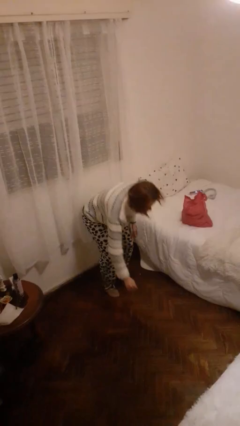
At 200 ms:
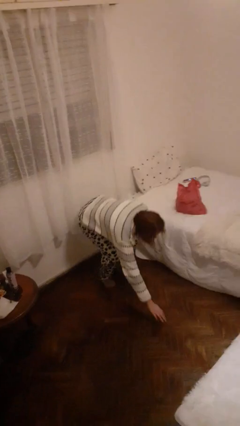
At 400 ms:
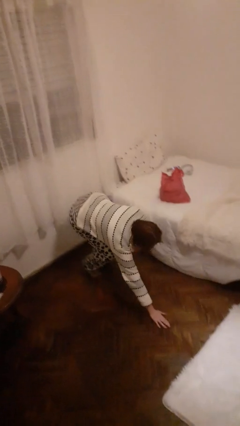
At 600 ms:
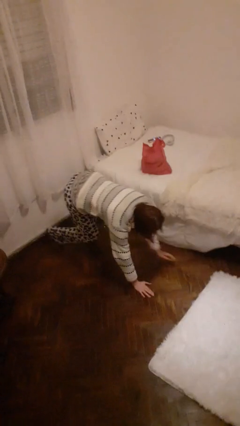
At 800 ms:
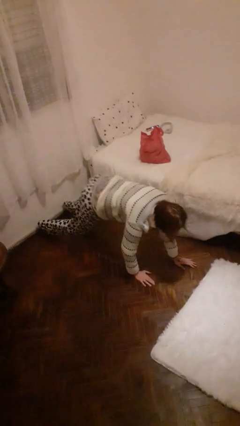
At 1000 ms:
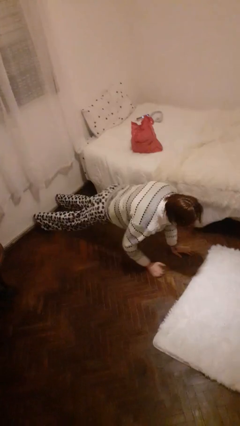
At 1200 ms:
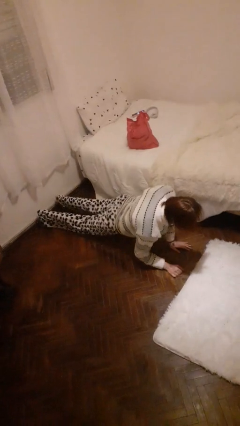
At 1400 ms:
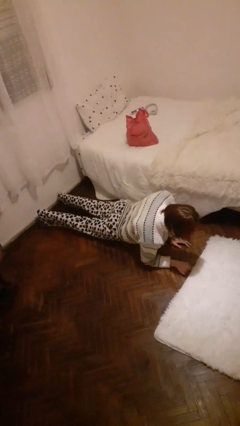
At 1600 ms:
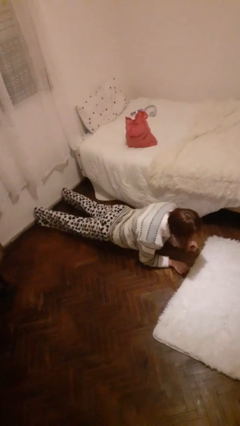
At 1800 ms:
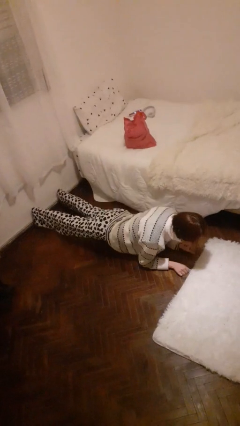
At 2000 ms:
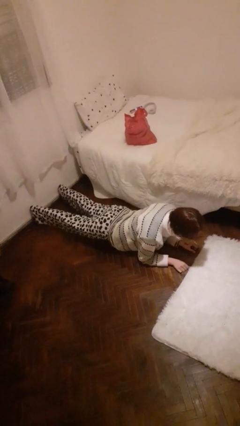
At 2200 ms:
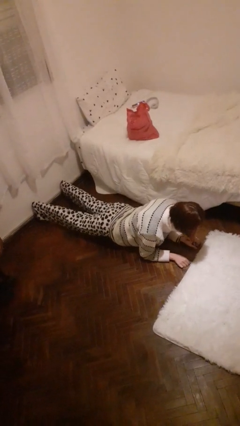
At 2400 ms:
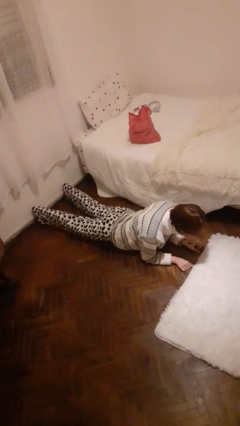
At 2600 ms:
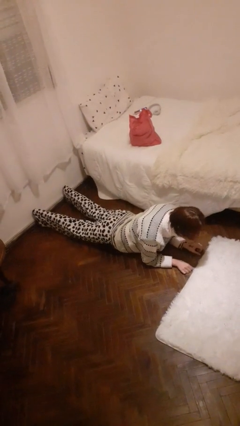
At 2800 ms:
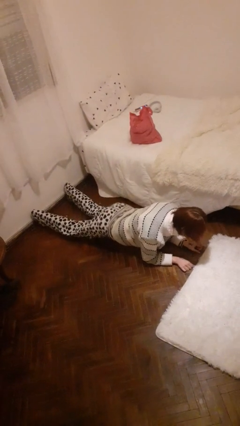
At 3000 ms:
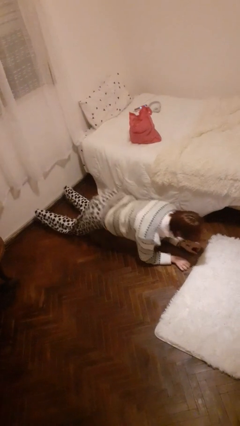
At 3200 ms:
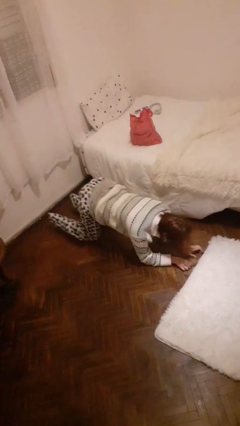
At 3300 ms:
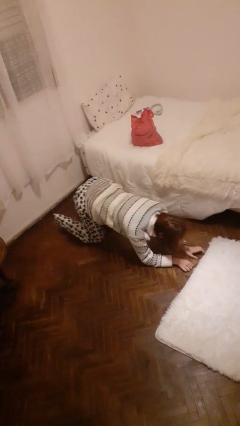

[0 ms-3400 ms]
person exercises with plank

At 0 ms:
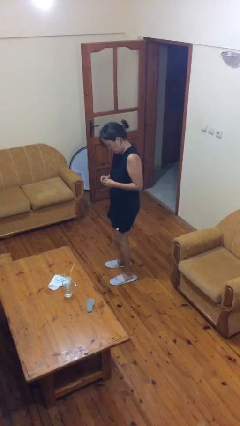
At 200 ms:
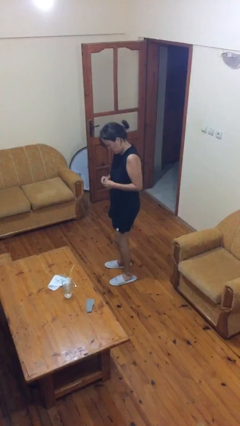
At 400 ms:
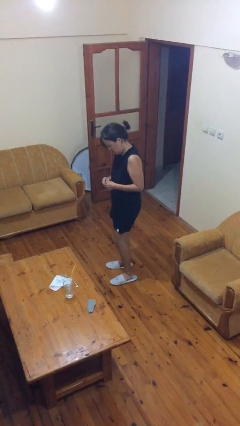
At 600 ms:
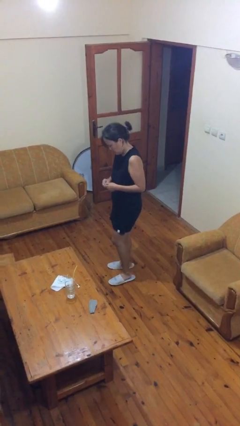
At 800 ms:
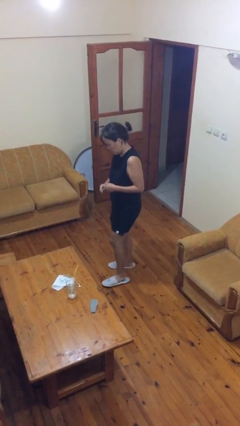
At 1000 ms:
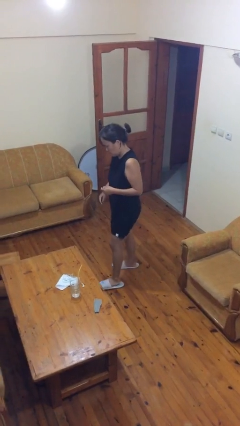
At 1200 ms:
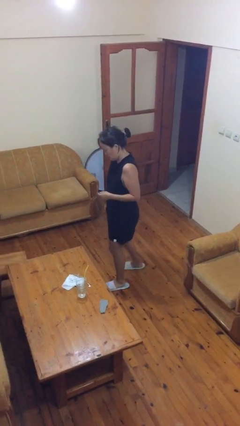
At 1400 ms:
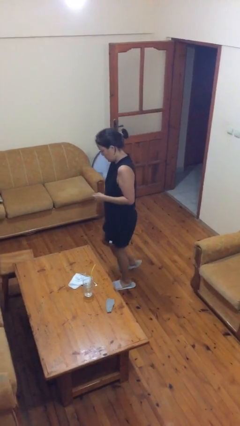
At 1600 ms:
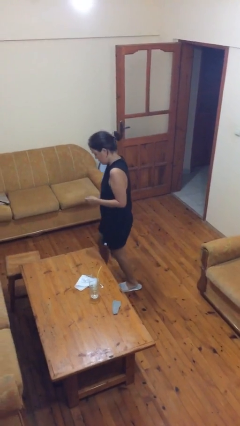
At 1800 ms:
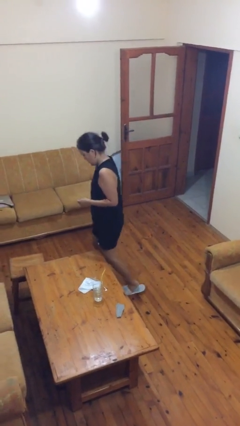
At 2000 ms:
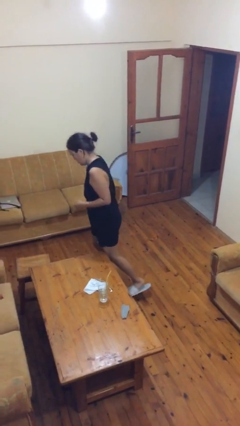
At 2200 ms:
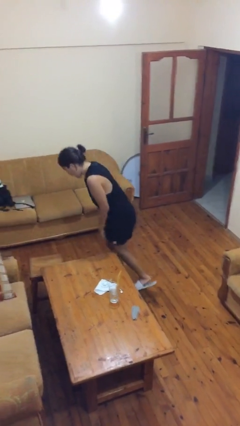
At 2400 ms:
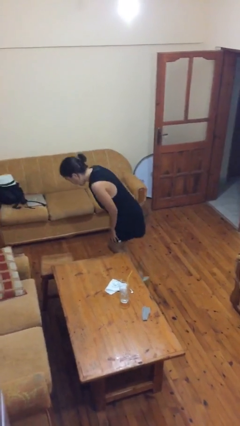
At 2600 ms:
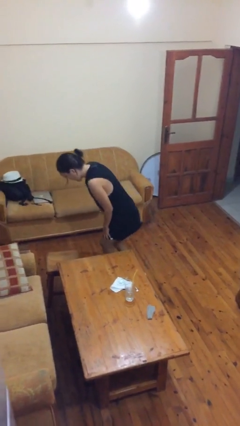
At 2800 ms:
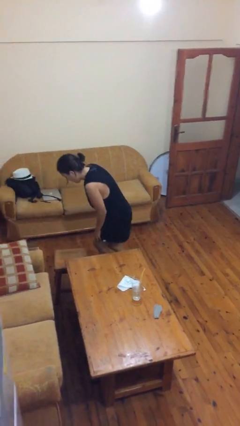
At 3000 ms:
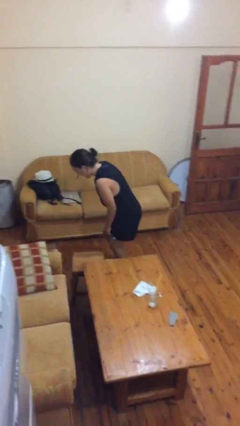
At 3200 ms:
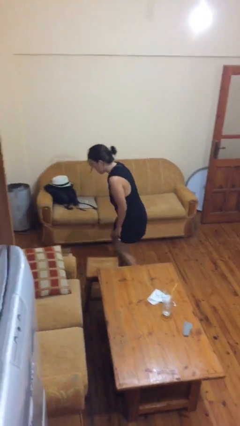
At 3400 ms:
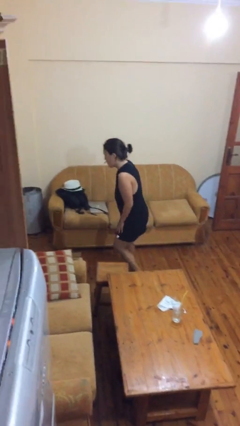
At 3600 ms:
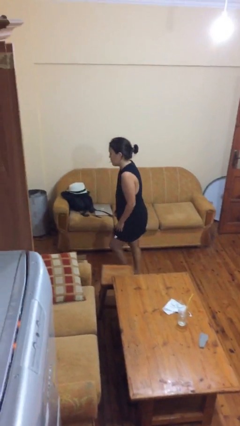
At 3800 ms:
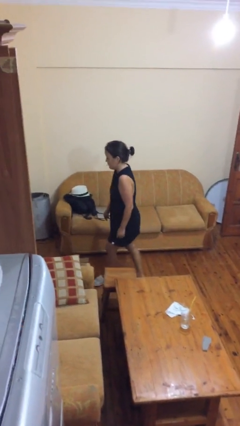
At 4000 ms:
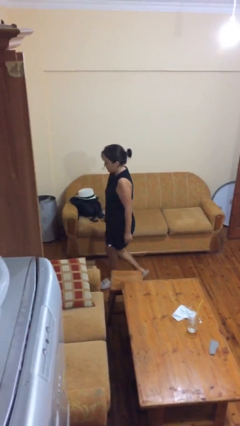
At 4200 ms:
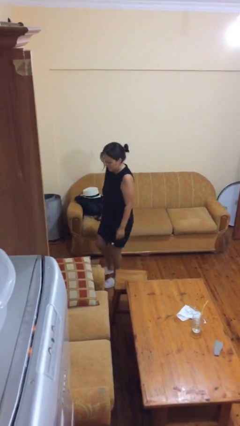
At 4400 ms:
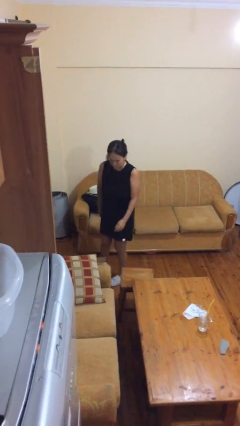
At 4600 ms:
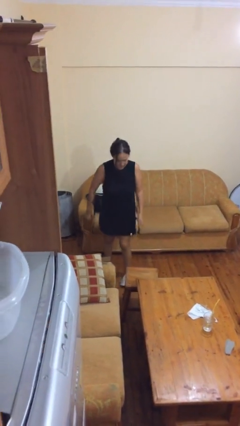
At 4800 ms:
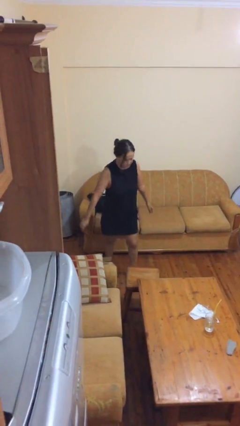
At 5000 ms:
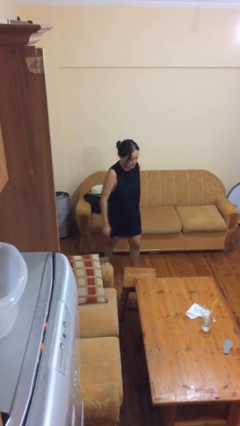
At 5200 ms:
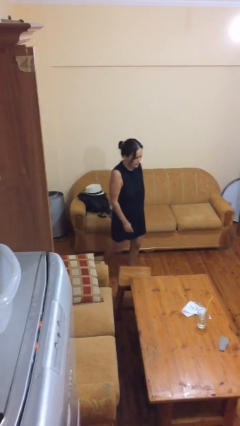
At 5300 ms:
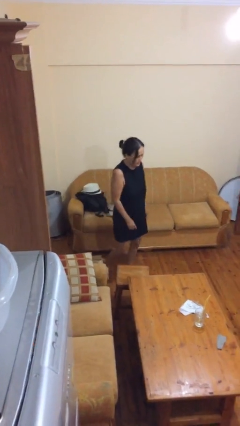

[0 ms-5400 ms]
person bumps into table

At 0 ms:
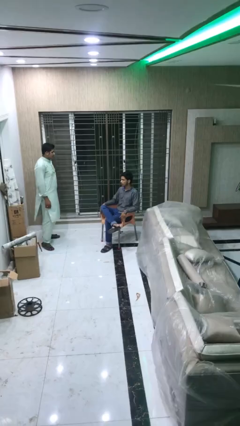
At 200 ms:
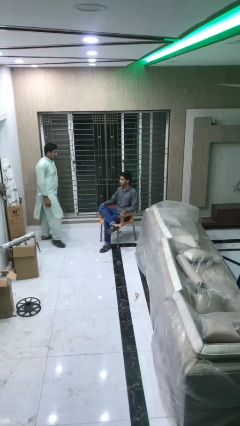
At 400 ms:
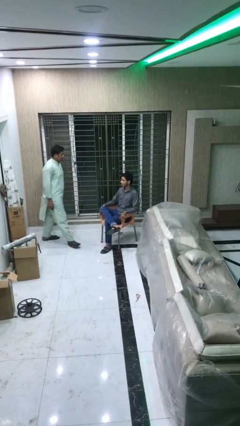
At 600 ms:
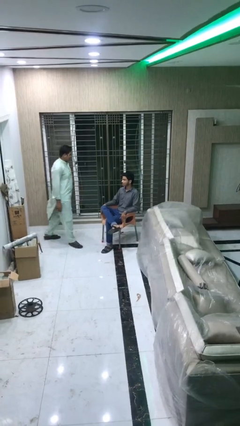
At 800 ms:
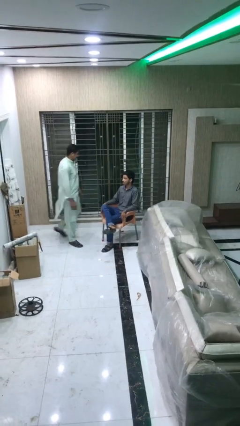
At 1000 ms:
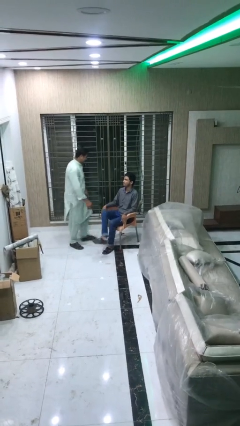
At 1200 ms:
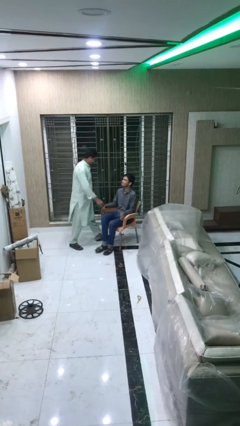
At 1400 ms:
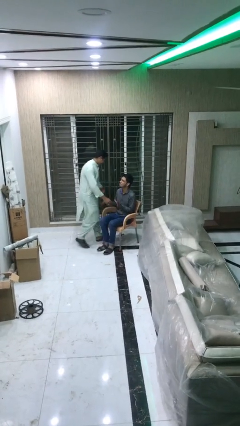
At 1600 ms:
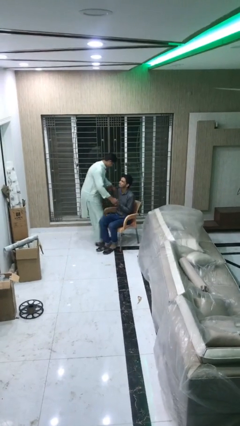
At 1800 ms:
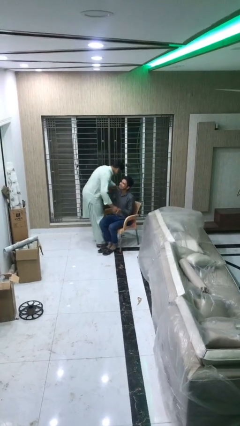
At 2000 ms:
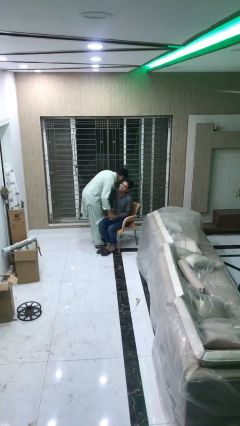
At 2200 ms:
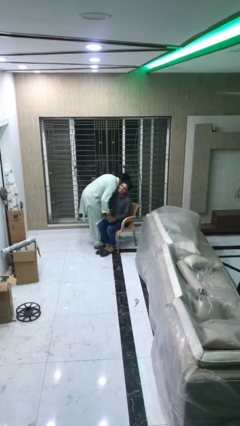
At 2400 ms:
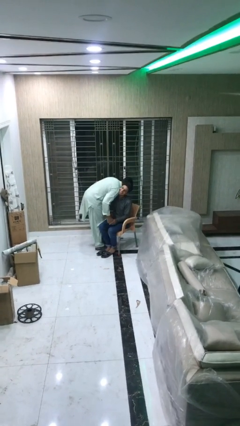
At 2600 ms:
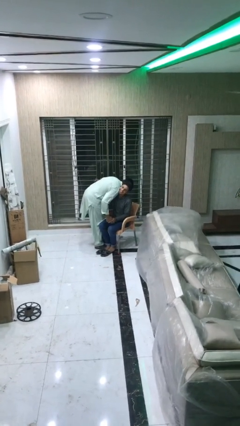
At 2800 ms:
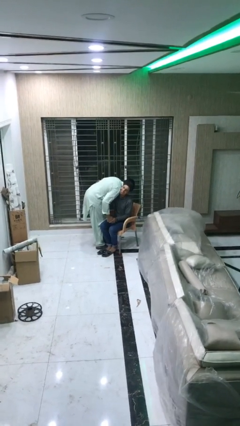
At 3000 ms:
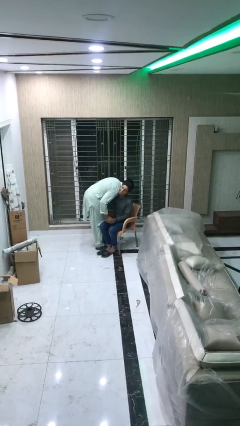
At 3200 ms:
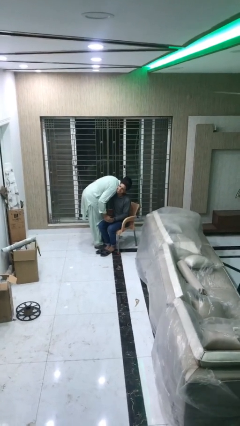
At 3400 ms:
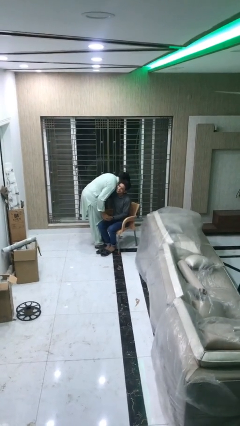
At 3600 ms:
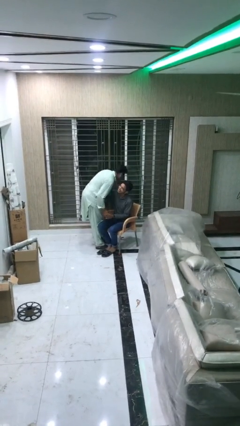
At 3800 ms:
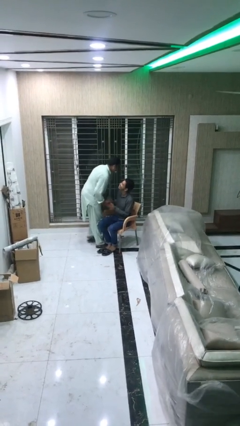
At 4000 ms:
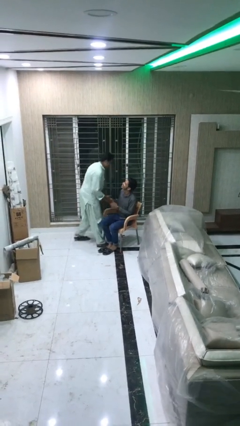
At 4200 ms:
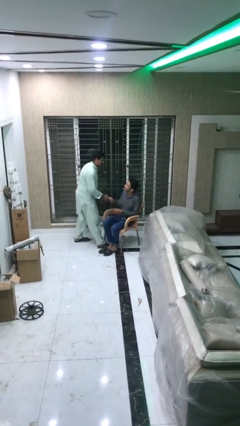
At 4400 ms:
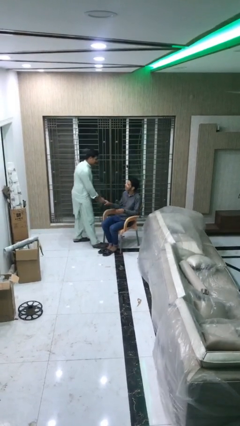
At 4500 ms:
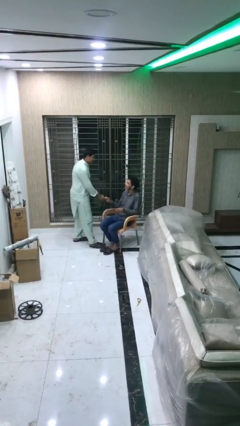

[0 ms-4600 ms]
person embraces person

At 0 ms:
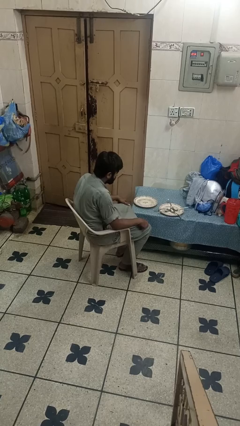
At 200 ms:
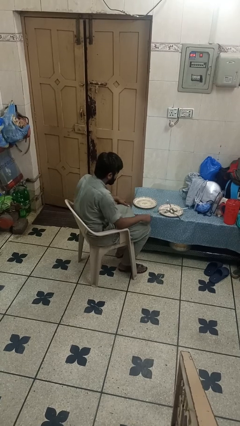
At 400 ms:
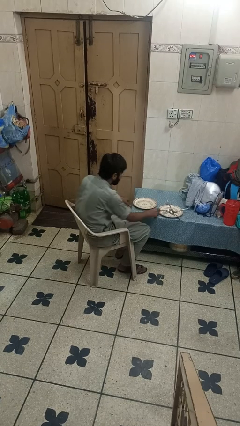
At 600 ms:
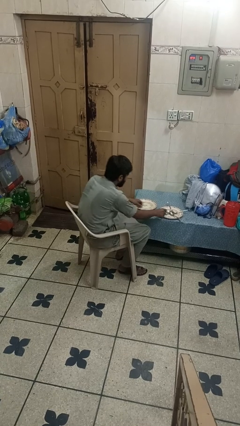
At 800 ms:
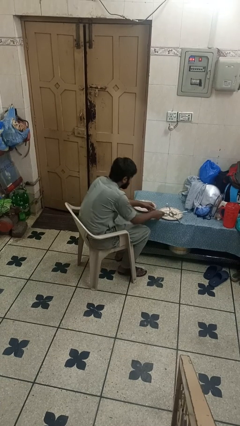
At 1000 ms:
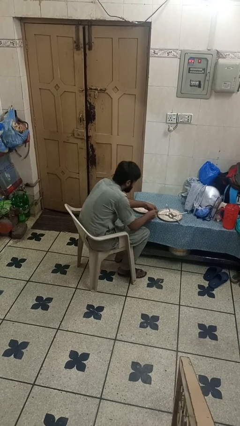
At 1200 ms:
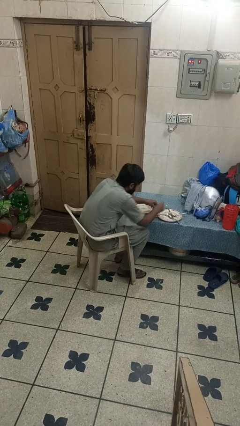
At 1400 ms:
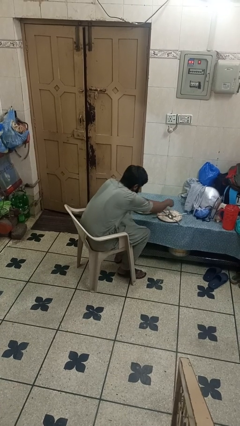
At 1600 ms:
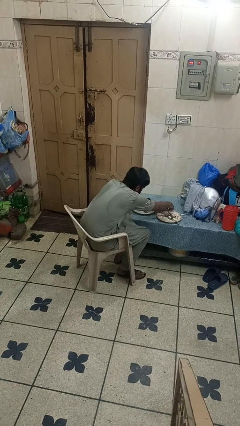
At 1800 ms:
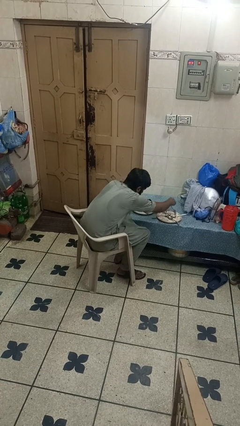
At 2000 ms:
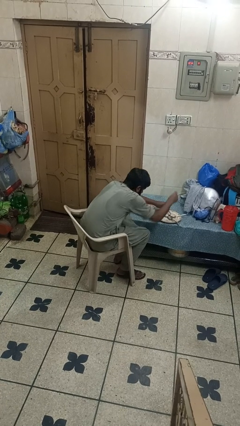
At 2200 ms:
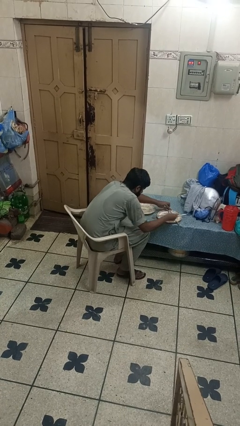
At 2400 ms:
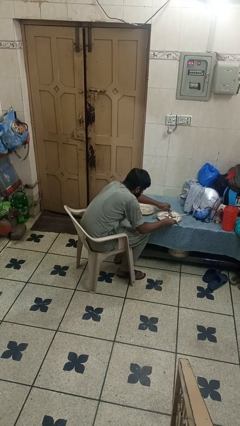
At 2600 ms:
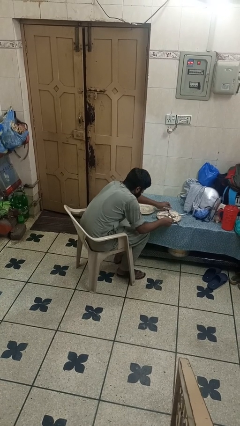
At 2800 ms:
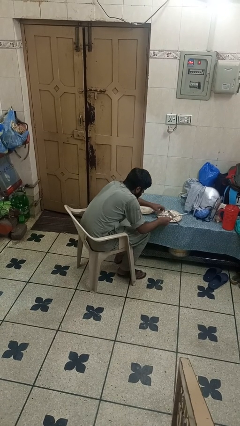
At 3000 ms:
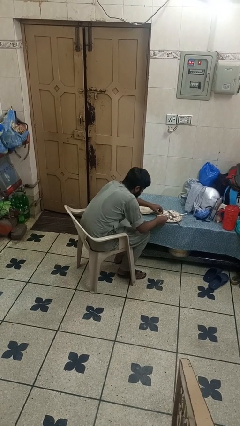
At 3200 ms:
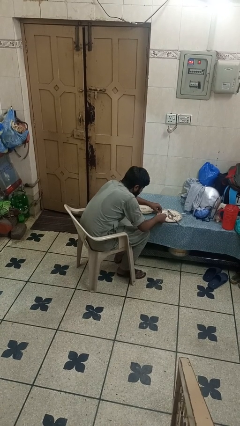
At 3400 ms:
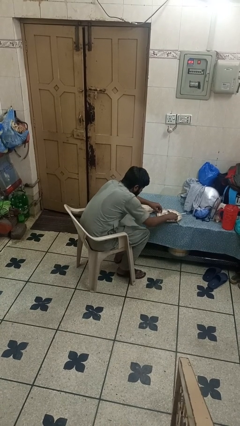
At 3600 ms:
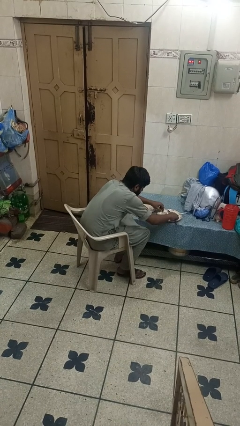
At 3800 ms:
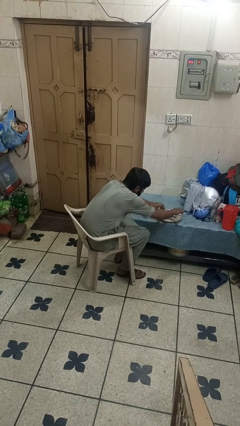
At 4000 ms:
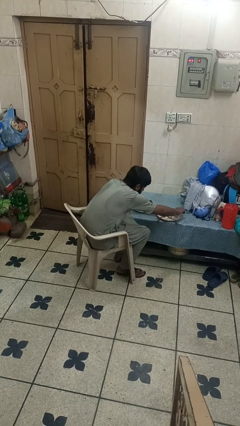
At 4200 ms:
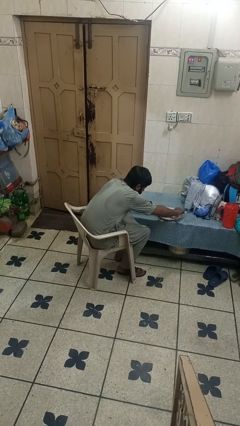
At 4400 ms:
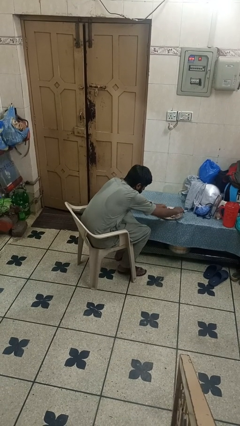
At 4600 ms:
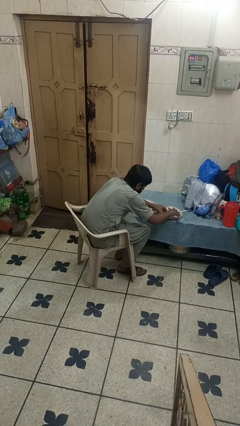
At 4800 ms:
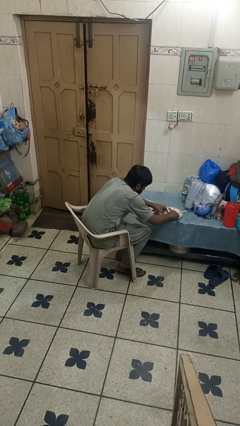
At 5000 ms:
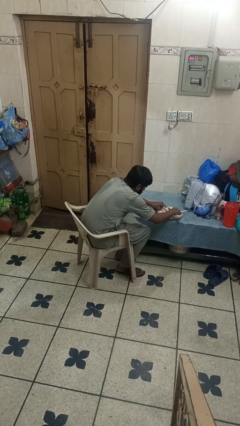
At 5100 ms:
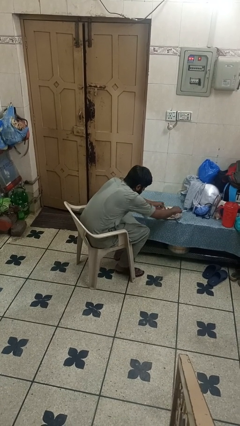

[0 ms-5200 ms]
person sets table
